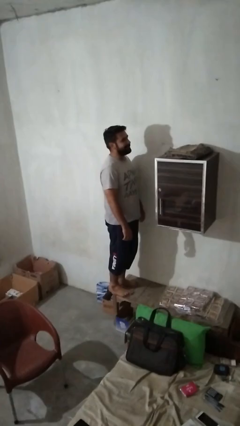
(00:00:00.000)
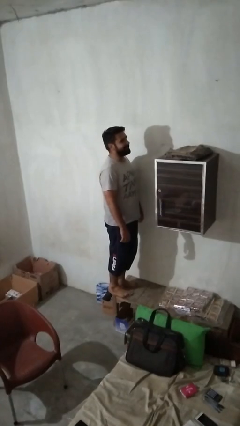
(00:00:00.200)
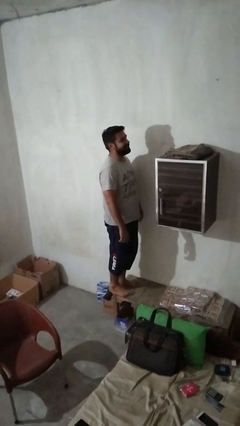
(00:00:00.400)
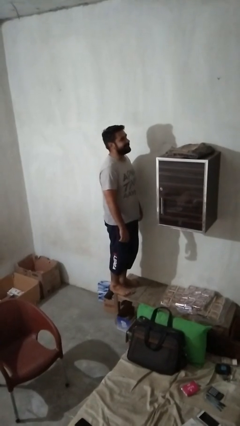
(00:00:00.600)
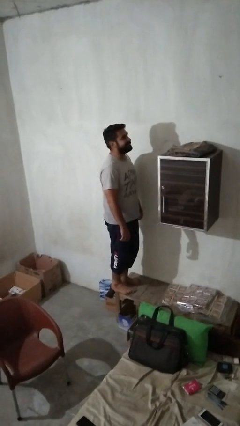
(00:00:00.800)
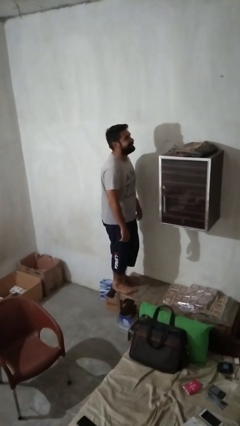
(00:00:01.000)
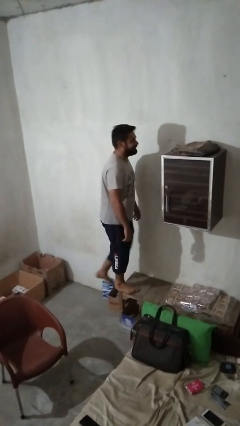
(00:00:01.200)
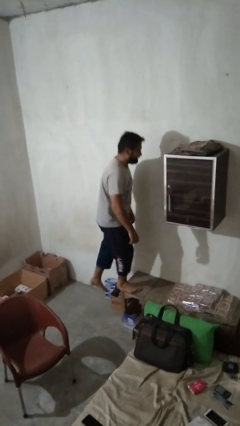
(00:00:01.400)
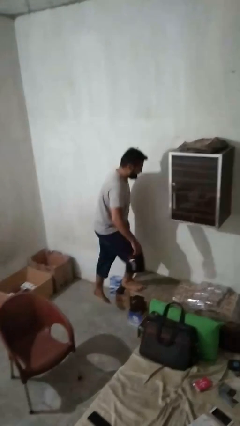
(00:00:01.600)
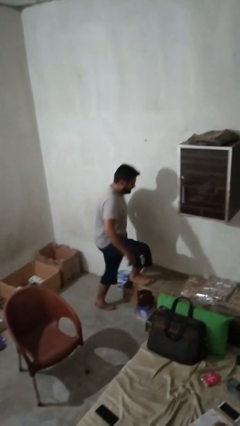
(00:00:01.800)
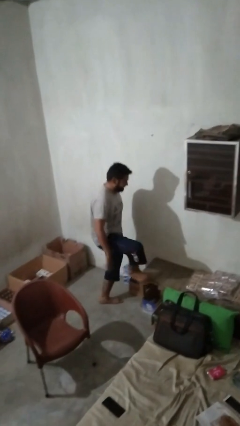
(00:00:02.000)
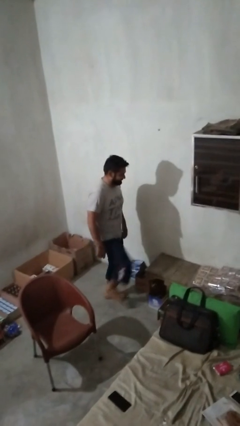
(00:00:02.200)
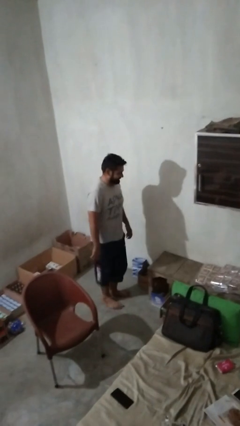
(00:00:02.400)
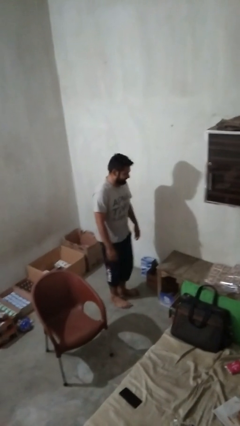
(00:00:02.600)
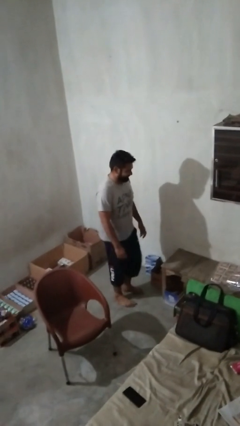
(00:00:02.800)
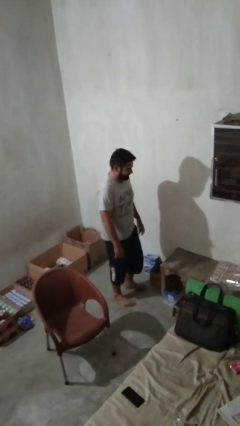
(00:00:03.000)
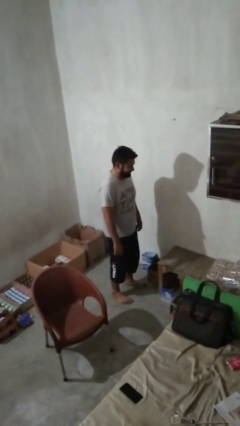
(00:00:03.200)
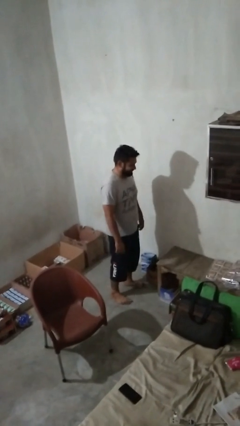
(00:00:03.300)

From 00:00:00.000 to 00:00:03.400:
person climbs off table

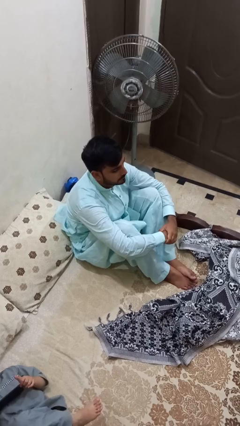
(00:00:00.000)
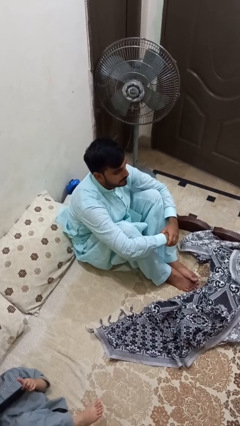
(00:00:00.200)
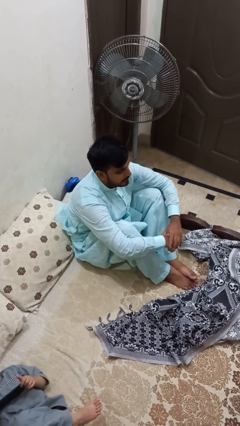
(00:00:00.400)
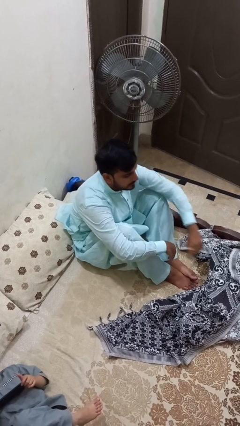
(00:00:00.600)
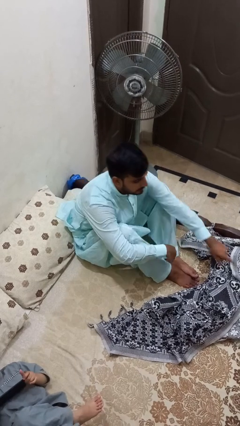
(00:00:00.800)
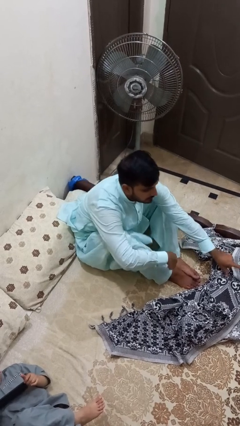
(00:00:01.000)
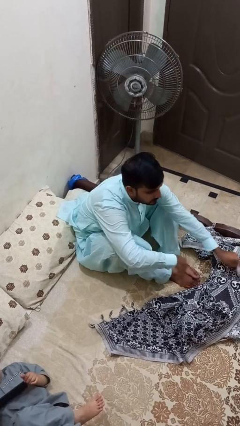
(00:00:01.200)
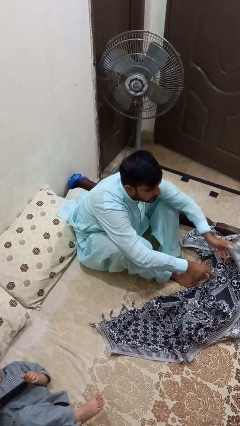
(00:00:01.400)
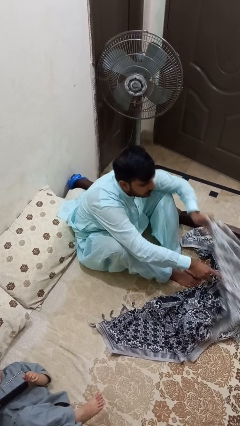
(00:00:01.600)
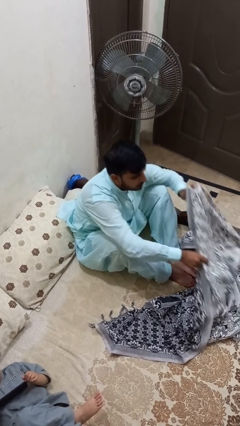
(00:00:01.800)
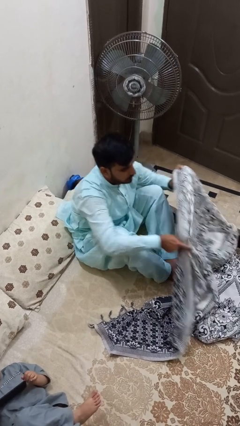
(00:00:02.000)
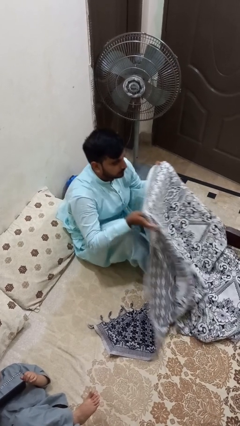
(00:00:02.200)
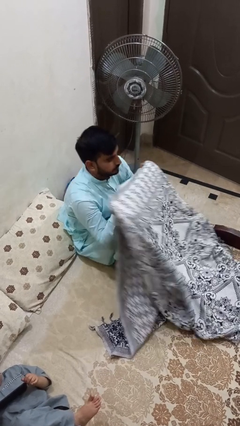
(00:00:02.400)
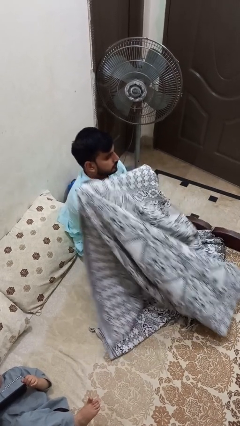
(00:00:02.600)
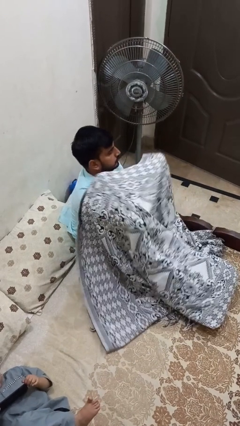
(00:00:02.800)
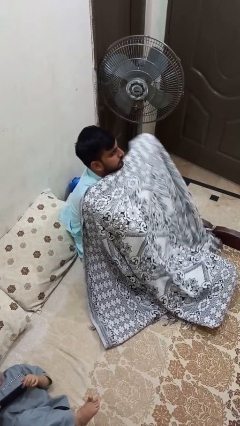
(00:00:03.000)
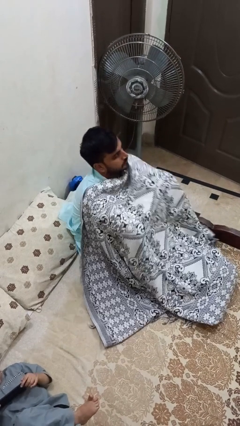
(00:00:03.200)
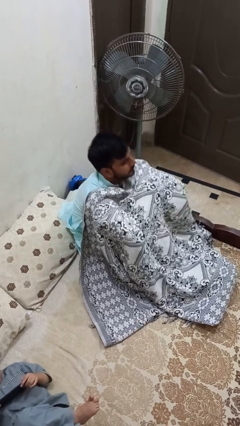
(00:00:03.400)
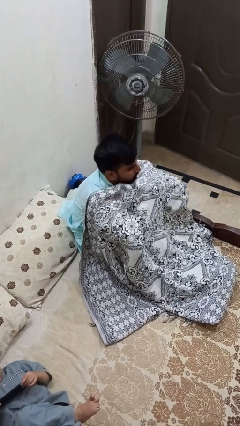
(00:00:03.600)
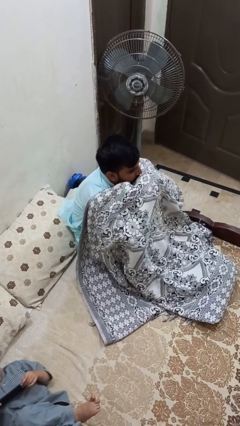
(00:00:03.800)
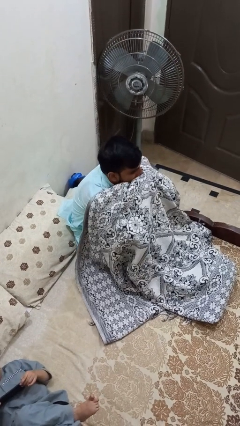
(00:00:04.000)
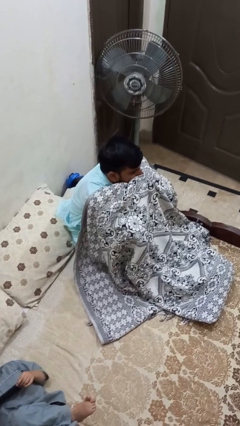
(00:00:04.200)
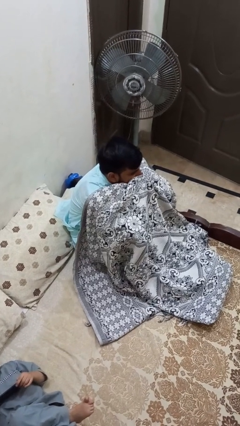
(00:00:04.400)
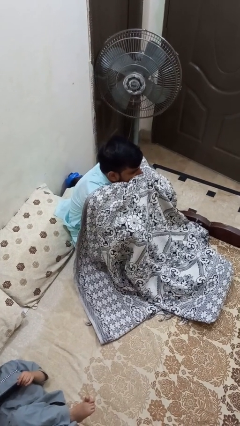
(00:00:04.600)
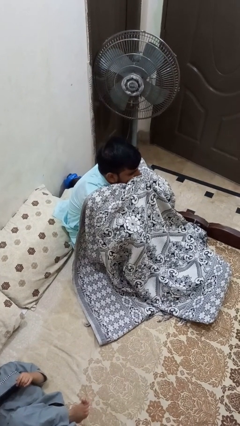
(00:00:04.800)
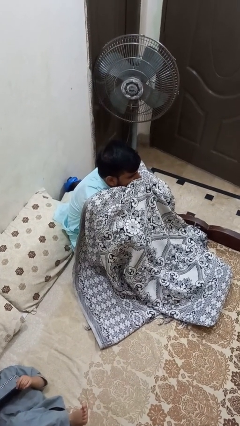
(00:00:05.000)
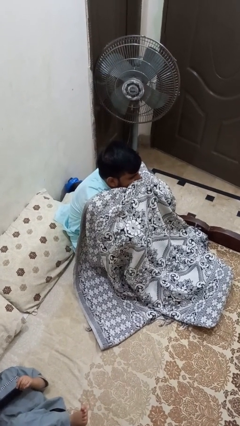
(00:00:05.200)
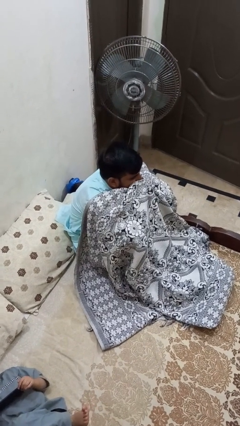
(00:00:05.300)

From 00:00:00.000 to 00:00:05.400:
person covers with blanket

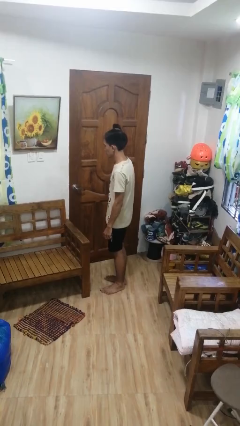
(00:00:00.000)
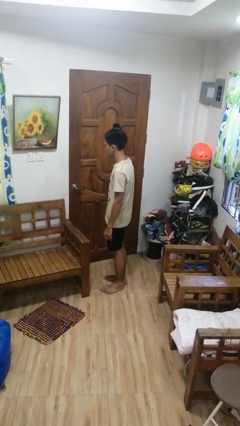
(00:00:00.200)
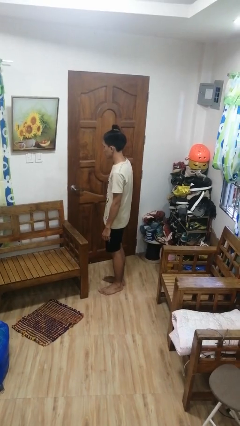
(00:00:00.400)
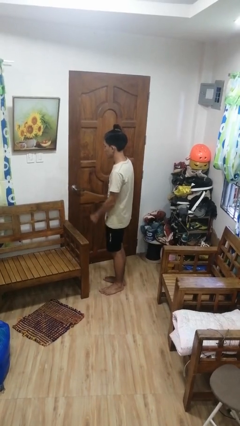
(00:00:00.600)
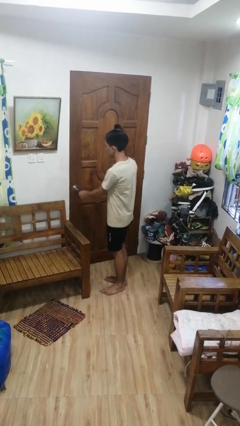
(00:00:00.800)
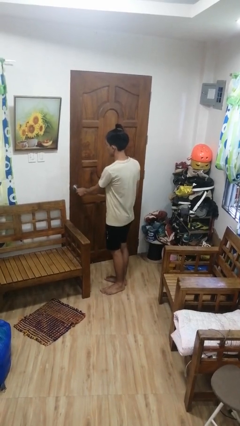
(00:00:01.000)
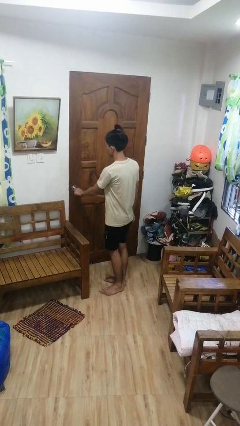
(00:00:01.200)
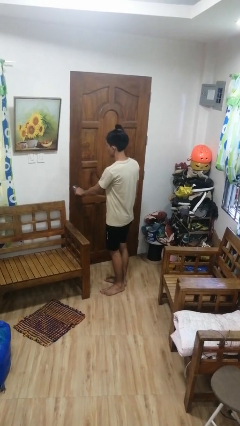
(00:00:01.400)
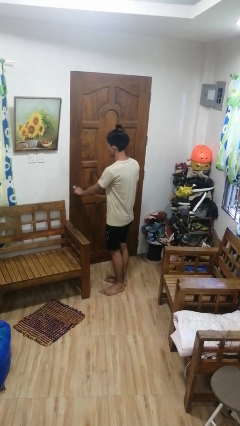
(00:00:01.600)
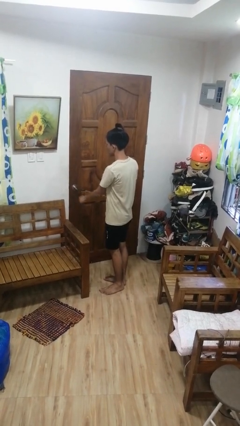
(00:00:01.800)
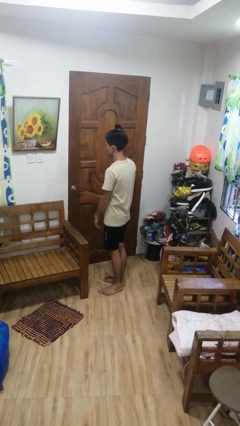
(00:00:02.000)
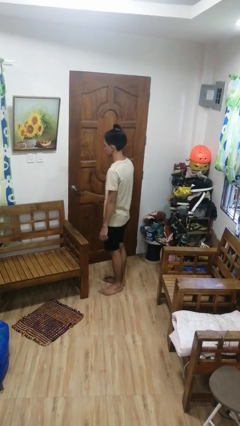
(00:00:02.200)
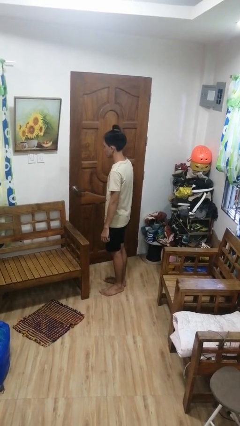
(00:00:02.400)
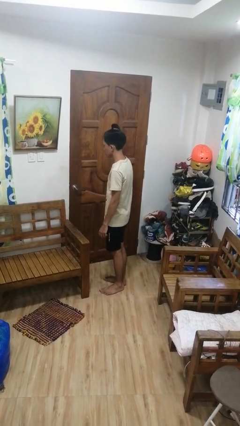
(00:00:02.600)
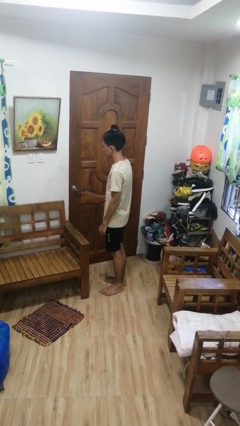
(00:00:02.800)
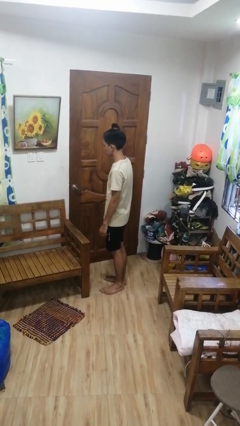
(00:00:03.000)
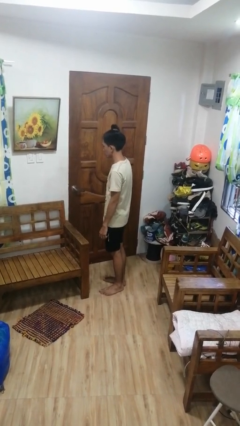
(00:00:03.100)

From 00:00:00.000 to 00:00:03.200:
person unlocks door with keys

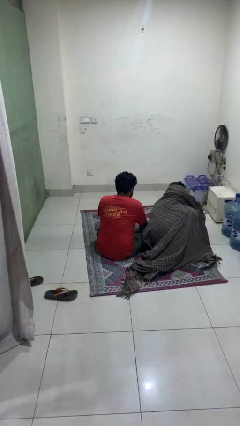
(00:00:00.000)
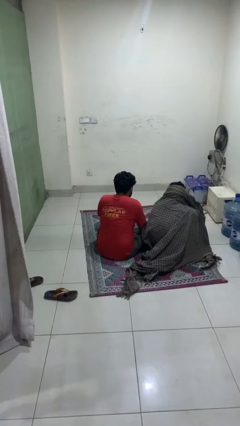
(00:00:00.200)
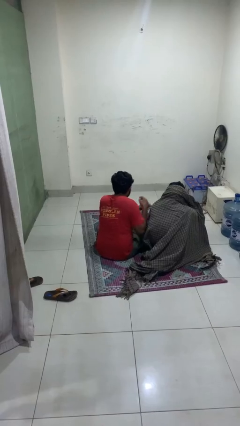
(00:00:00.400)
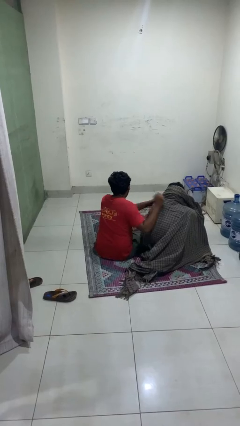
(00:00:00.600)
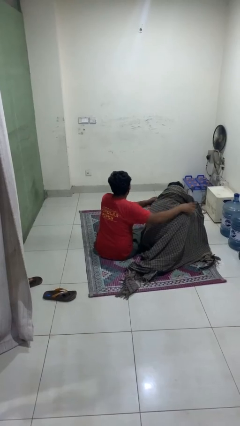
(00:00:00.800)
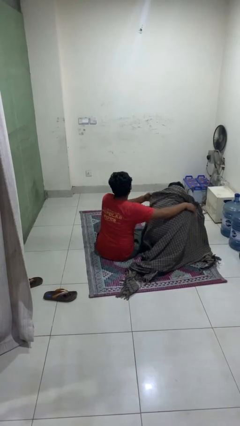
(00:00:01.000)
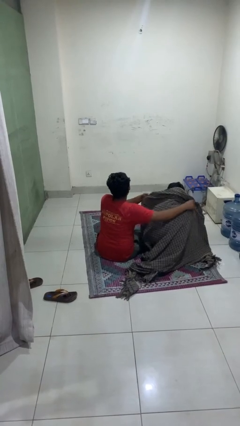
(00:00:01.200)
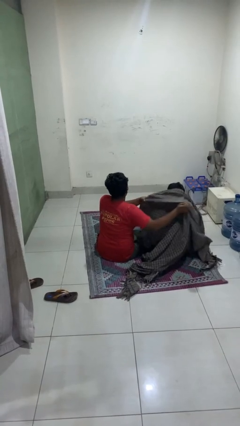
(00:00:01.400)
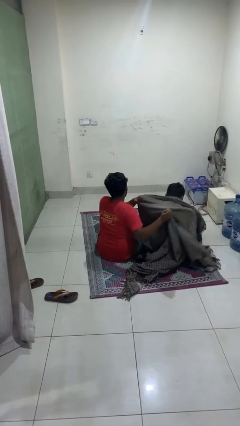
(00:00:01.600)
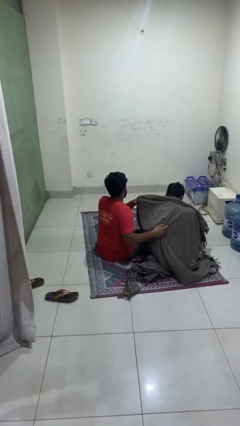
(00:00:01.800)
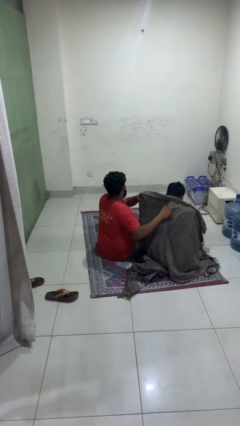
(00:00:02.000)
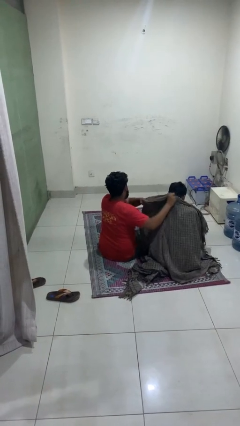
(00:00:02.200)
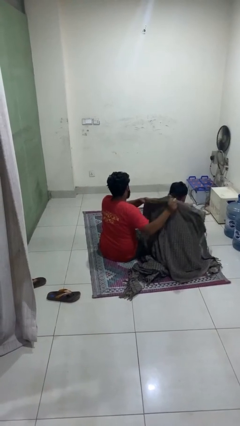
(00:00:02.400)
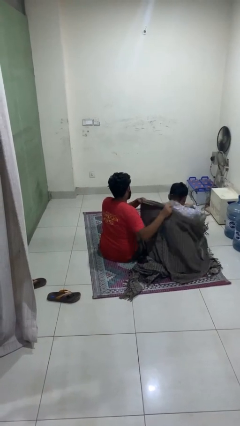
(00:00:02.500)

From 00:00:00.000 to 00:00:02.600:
person uncovers friend with blanket

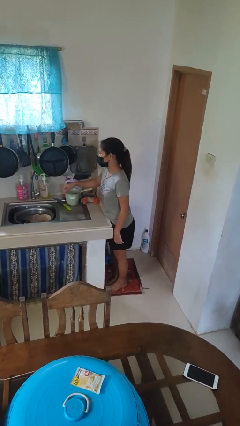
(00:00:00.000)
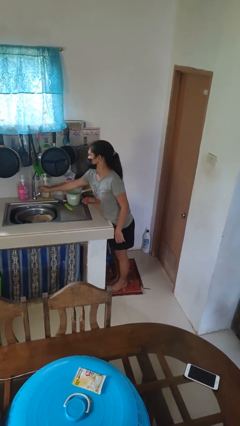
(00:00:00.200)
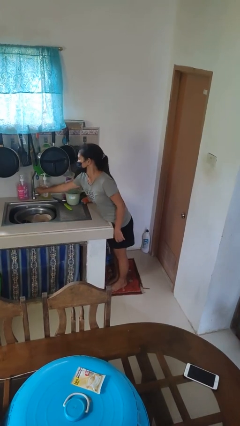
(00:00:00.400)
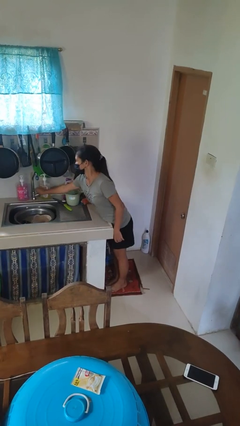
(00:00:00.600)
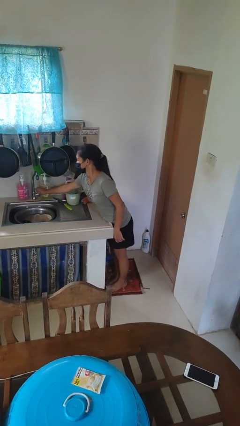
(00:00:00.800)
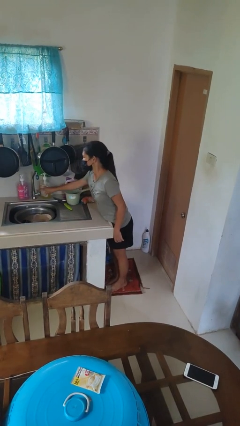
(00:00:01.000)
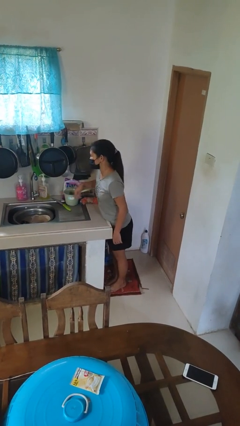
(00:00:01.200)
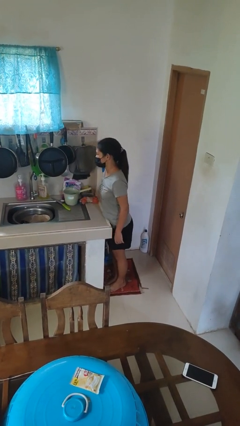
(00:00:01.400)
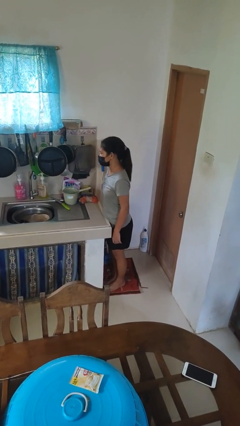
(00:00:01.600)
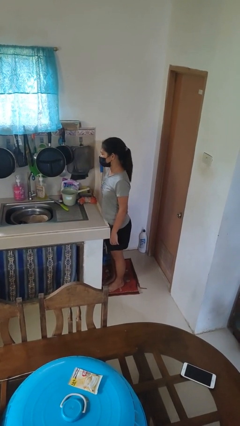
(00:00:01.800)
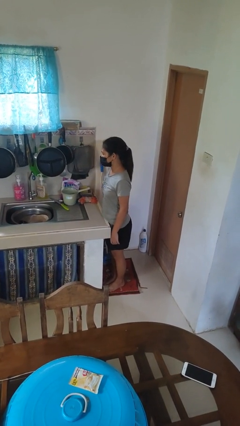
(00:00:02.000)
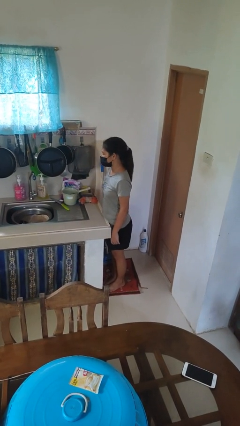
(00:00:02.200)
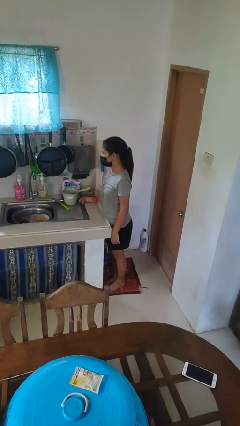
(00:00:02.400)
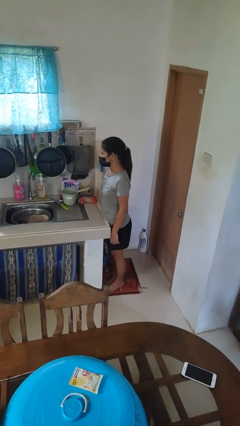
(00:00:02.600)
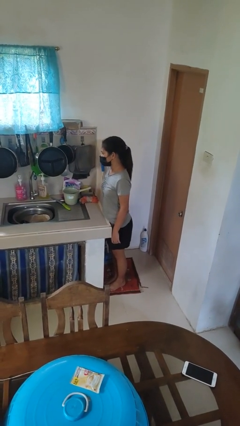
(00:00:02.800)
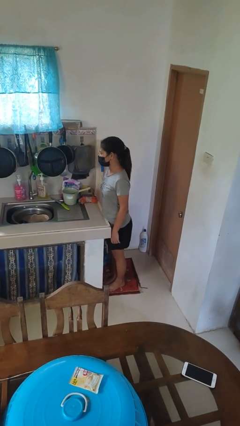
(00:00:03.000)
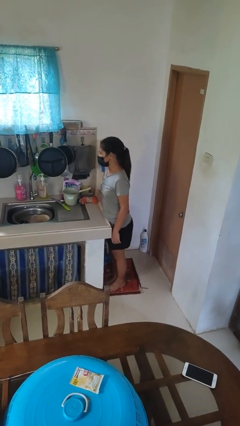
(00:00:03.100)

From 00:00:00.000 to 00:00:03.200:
person turns on faucet
